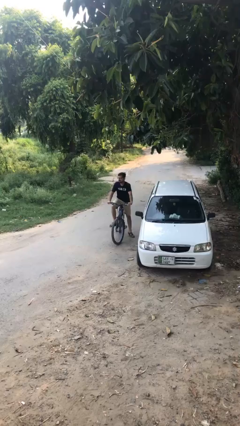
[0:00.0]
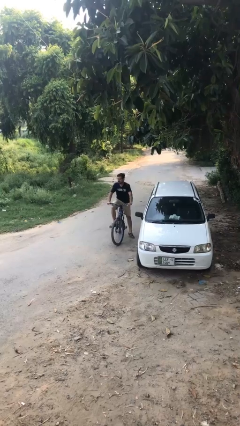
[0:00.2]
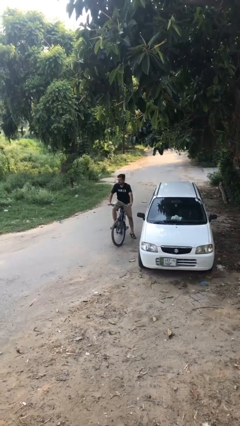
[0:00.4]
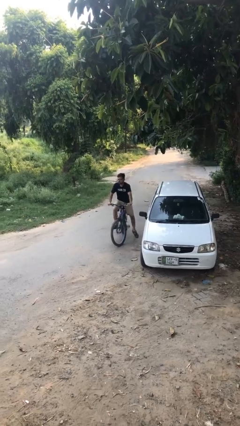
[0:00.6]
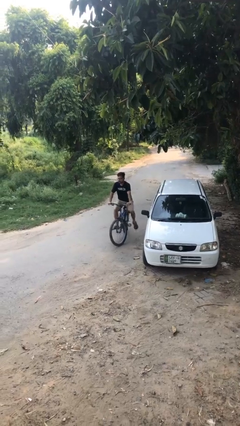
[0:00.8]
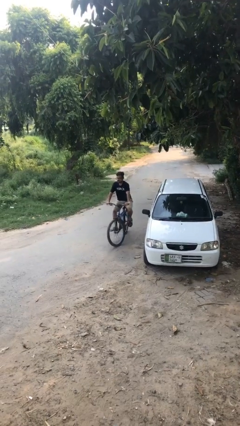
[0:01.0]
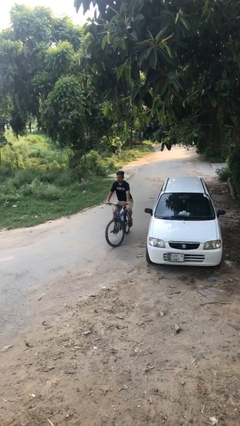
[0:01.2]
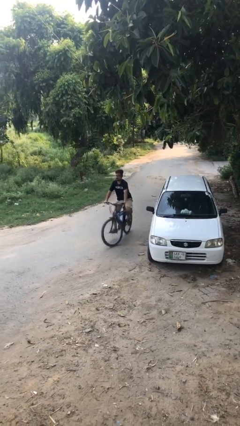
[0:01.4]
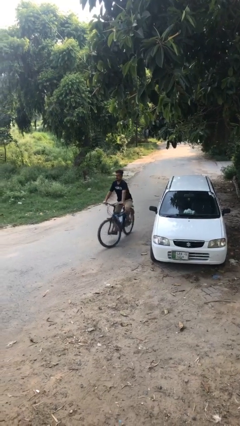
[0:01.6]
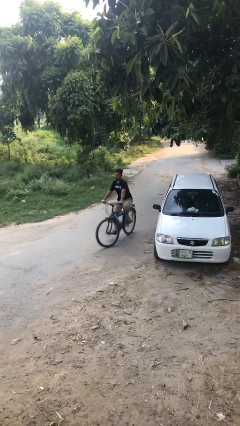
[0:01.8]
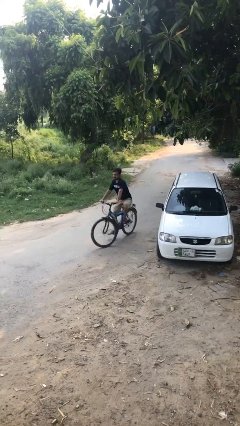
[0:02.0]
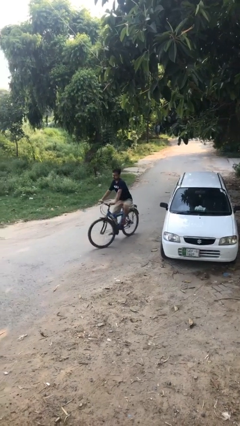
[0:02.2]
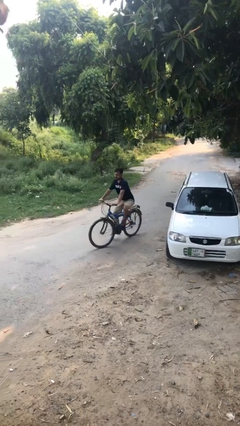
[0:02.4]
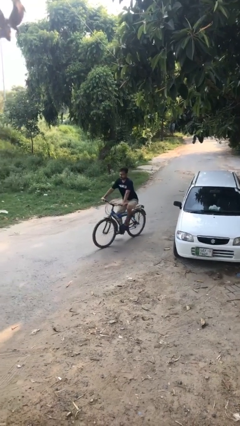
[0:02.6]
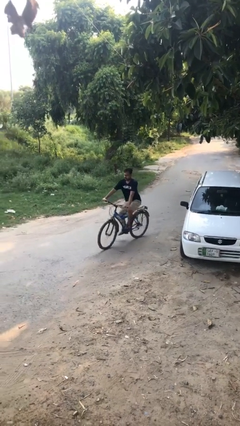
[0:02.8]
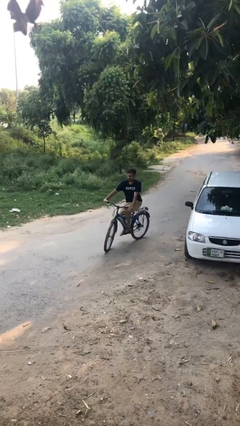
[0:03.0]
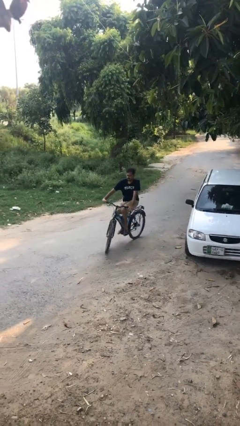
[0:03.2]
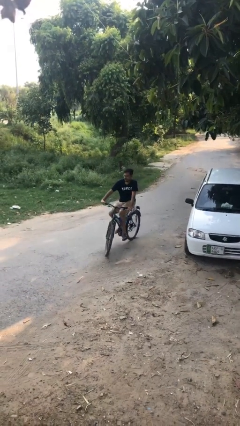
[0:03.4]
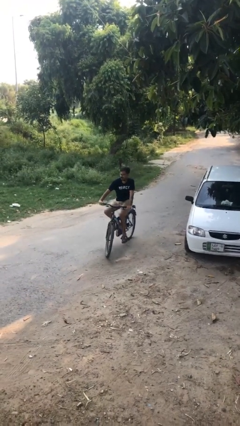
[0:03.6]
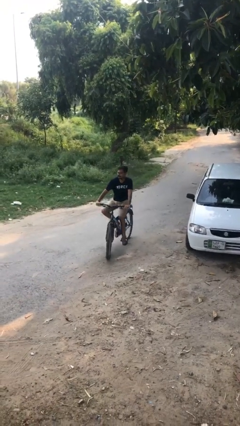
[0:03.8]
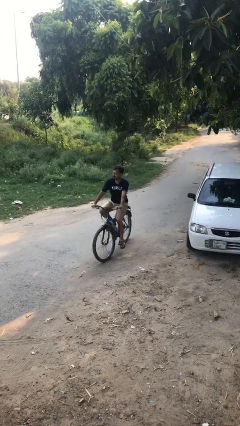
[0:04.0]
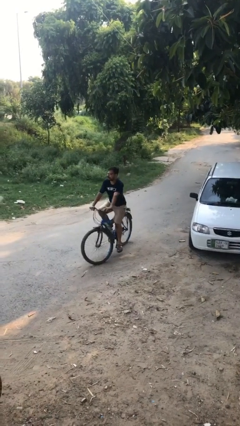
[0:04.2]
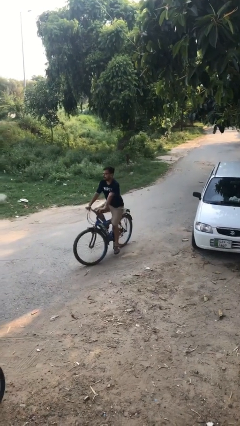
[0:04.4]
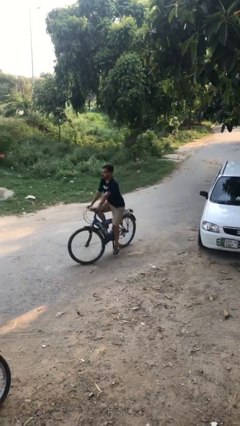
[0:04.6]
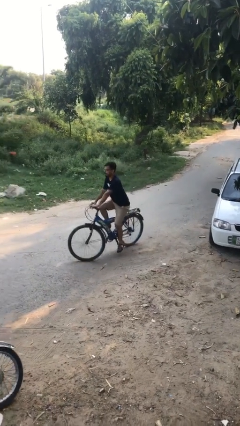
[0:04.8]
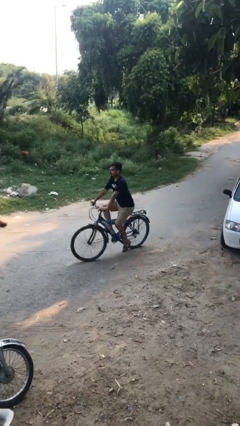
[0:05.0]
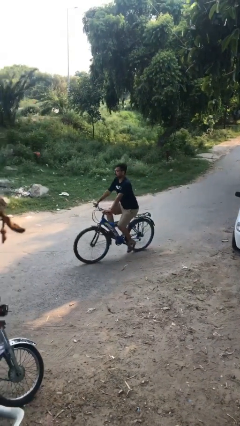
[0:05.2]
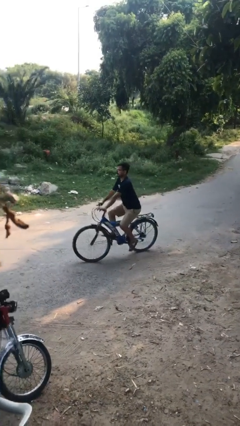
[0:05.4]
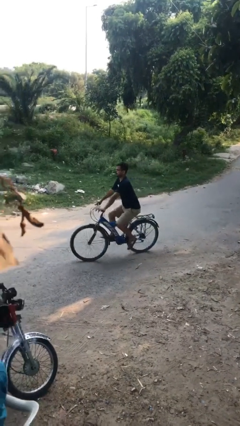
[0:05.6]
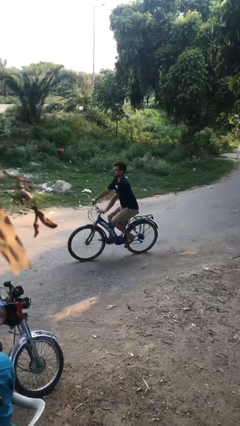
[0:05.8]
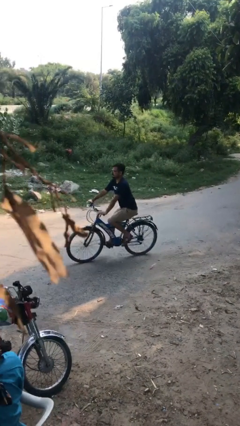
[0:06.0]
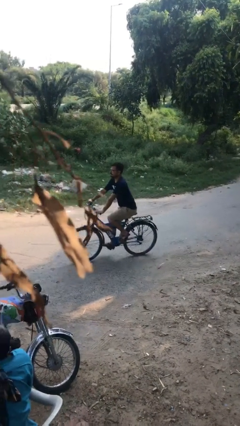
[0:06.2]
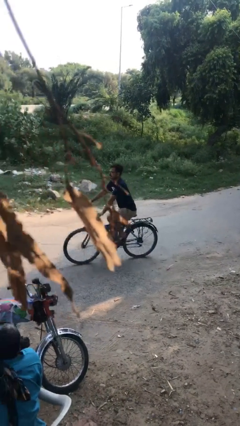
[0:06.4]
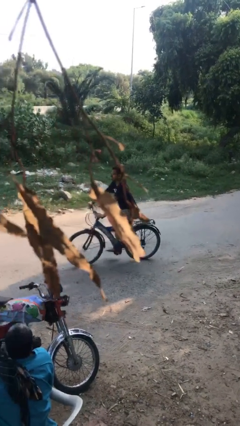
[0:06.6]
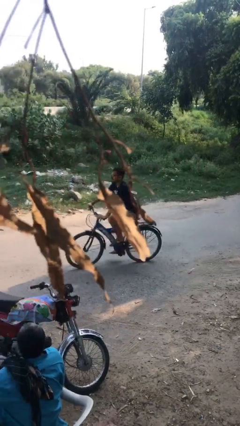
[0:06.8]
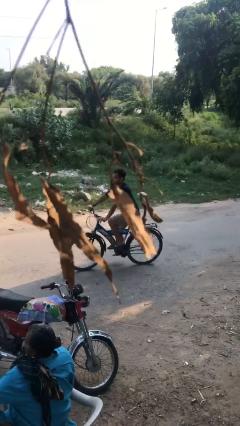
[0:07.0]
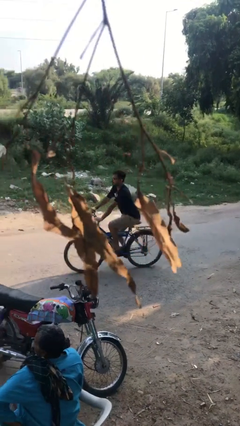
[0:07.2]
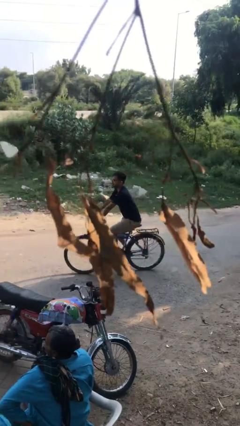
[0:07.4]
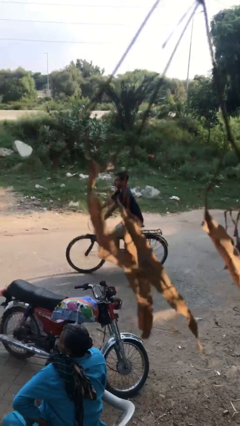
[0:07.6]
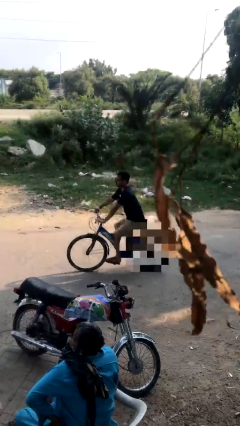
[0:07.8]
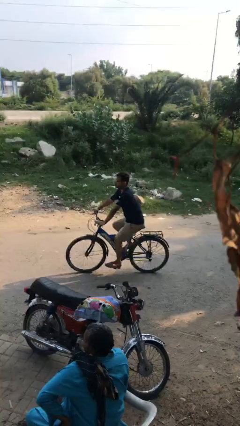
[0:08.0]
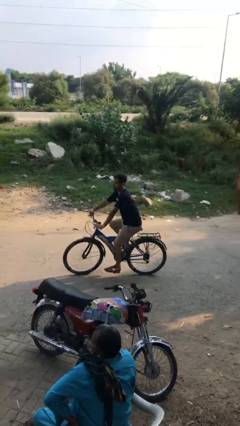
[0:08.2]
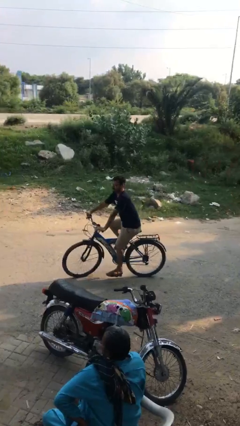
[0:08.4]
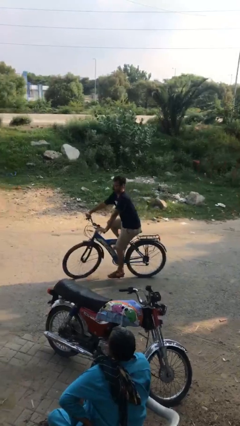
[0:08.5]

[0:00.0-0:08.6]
person rides bicycle

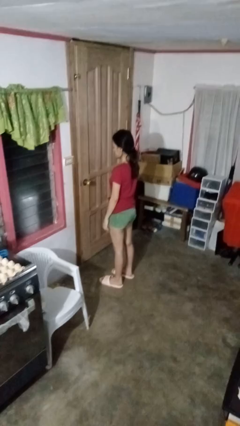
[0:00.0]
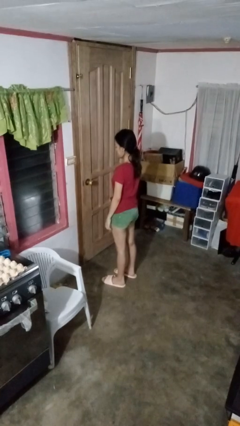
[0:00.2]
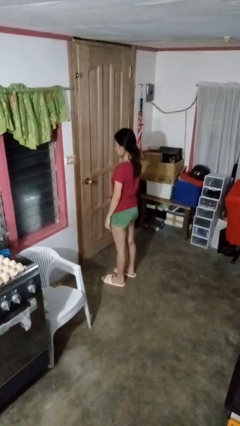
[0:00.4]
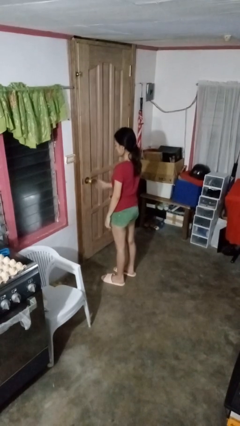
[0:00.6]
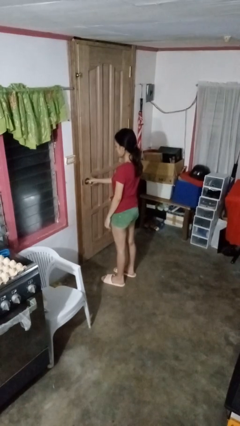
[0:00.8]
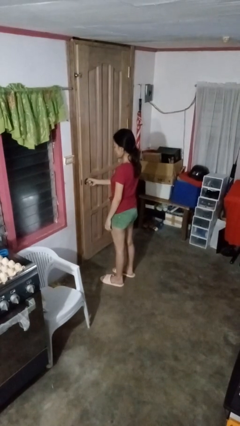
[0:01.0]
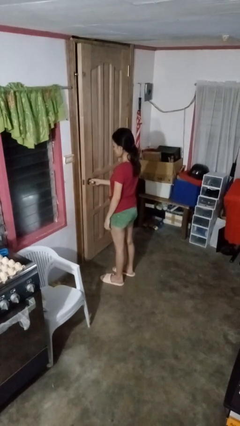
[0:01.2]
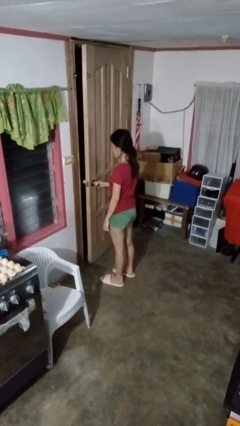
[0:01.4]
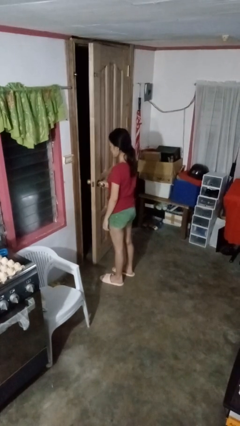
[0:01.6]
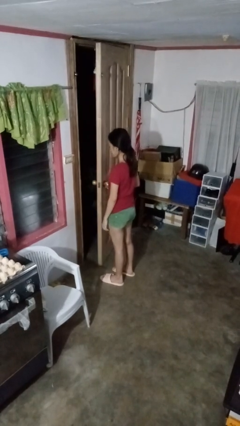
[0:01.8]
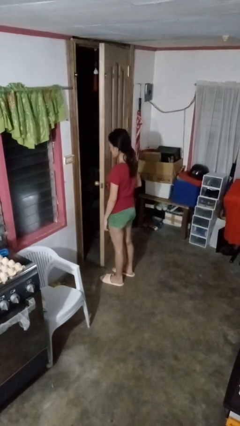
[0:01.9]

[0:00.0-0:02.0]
person opens facility door

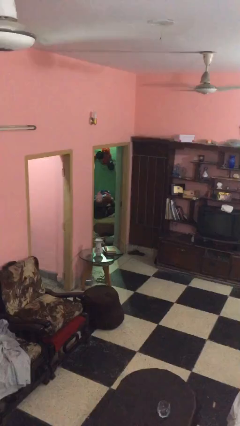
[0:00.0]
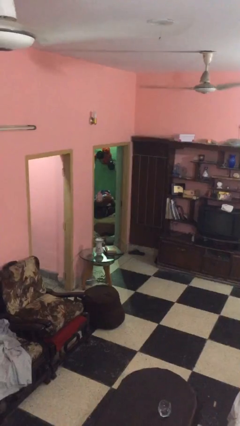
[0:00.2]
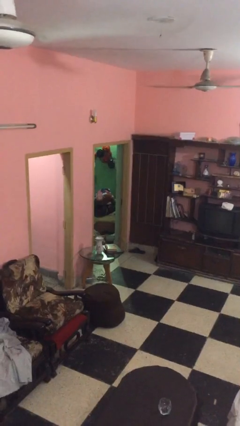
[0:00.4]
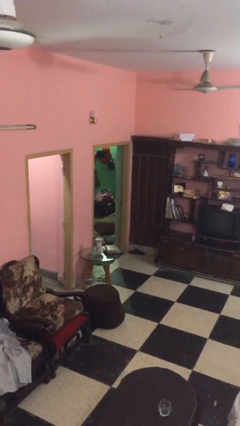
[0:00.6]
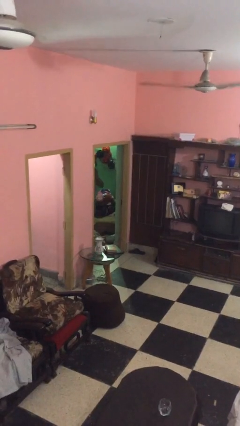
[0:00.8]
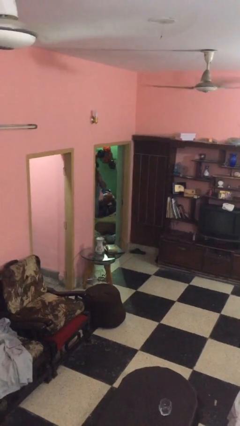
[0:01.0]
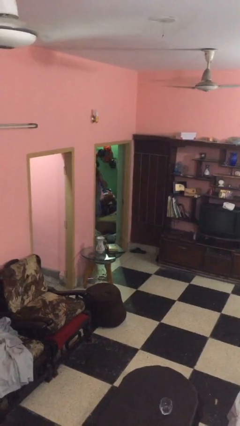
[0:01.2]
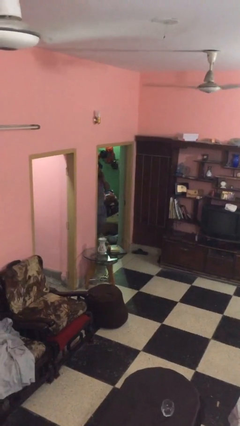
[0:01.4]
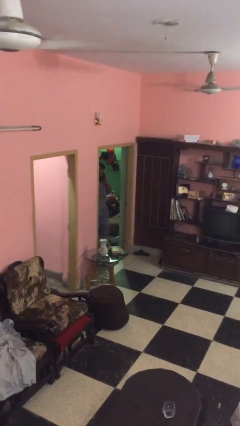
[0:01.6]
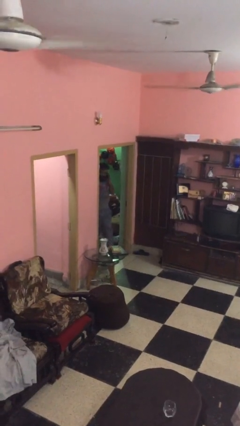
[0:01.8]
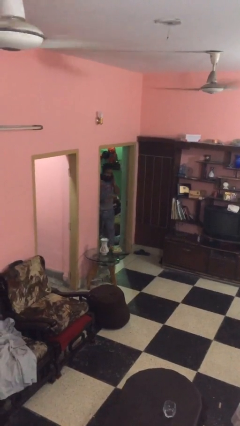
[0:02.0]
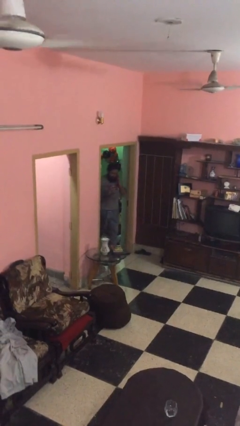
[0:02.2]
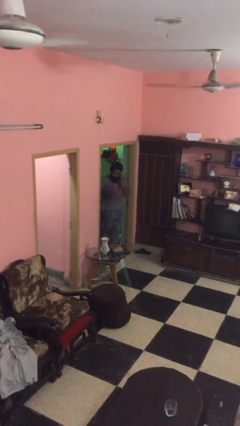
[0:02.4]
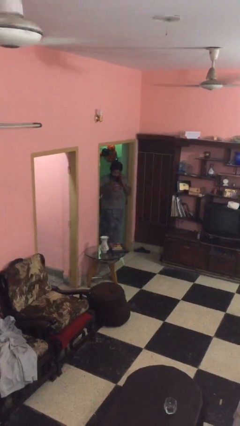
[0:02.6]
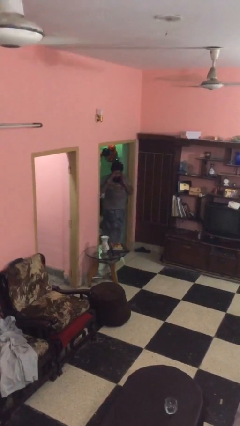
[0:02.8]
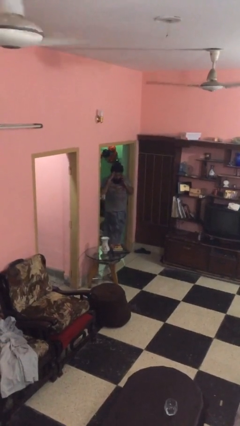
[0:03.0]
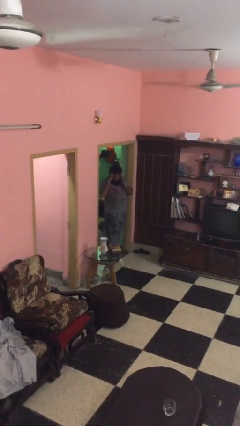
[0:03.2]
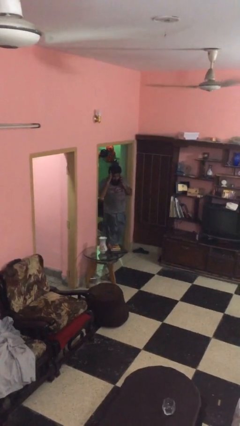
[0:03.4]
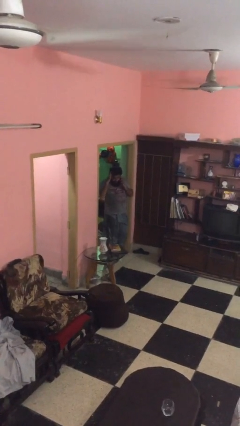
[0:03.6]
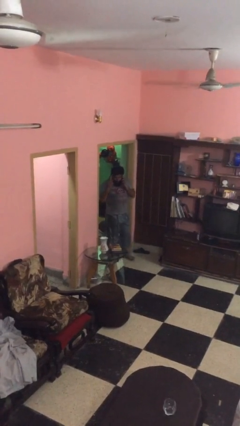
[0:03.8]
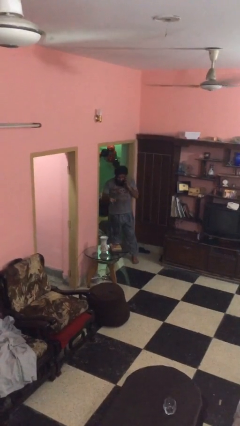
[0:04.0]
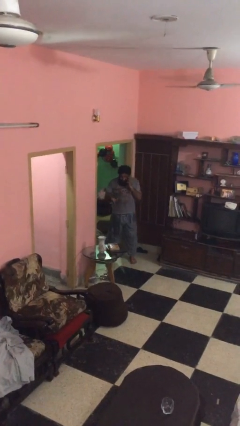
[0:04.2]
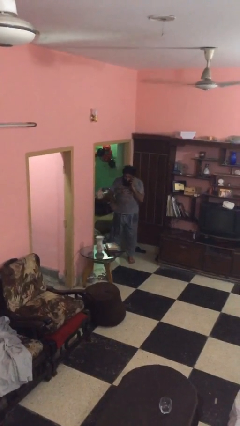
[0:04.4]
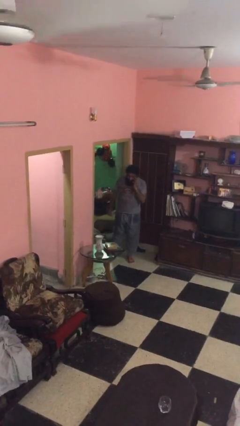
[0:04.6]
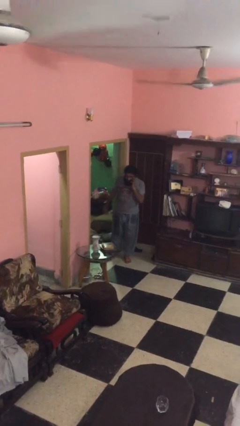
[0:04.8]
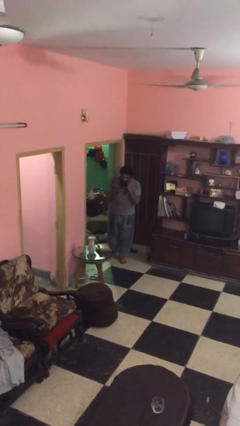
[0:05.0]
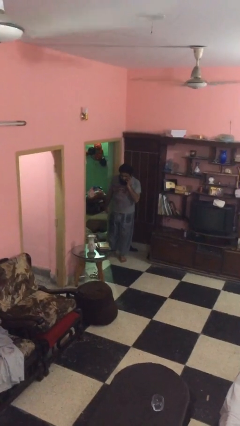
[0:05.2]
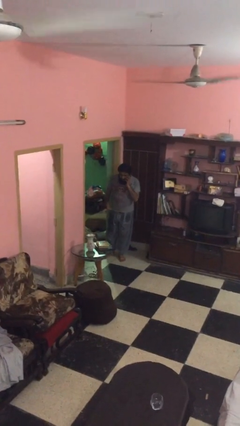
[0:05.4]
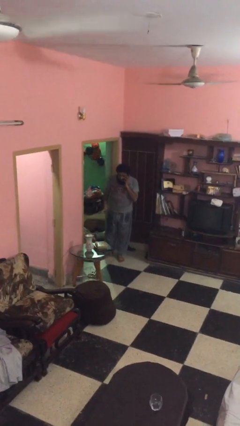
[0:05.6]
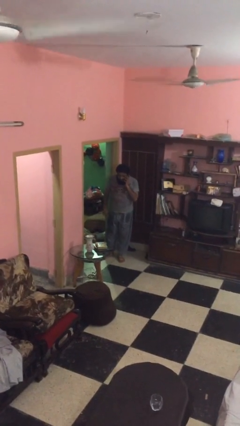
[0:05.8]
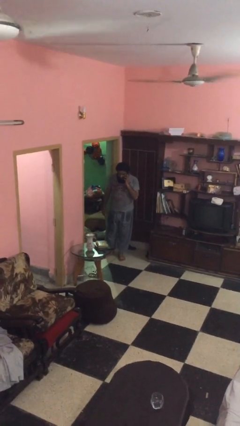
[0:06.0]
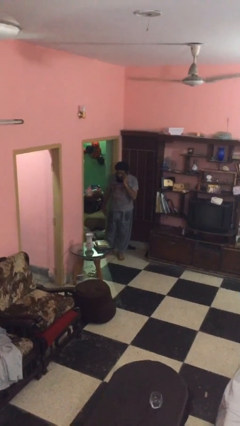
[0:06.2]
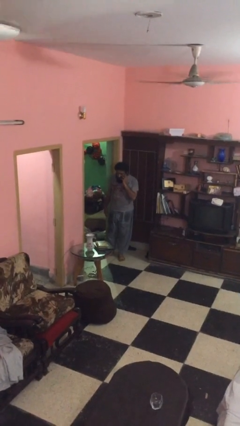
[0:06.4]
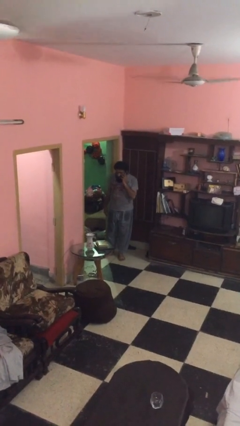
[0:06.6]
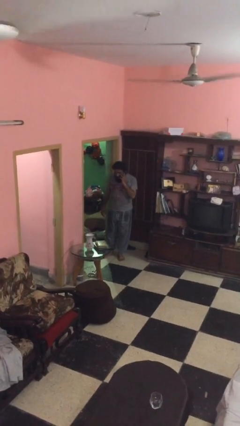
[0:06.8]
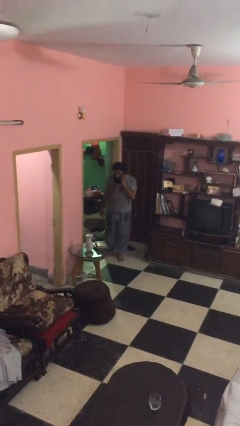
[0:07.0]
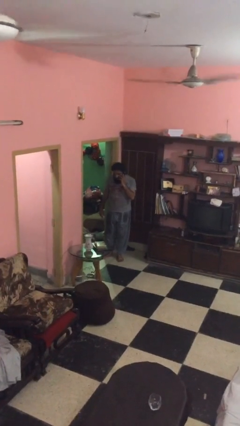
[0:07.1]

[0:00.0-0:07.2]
person enters scene through structure
